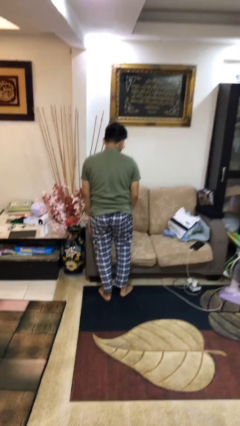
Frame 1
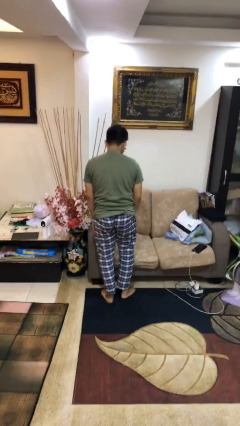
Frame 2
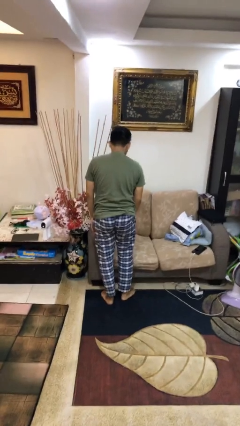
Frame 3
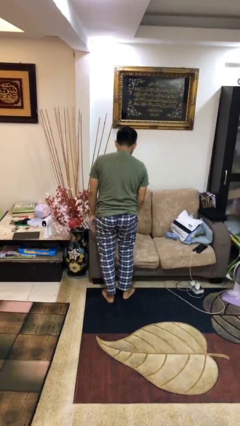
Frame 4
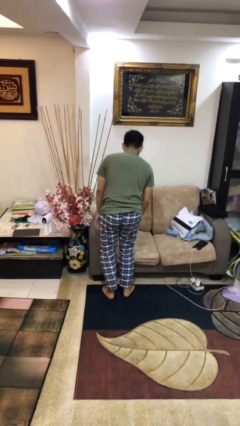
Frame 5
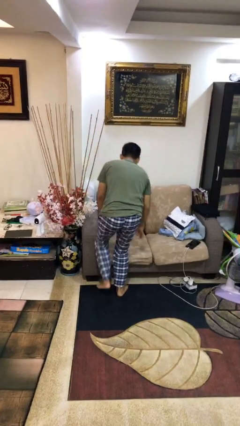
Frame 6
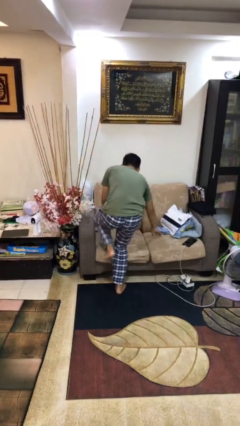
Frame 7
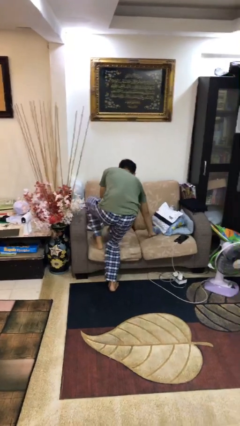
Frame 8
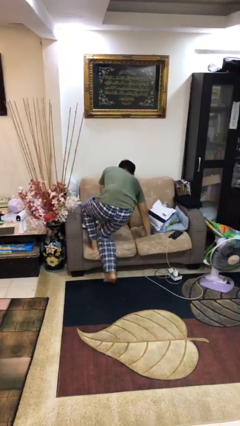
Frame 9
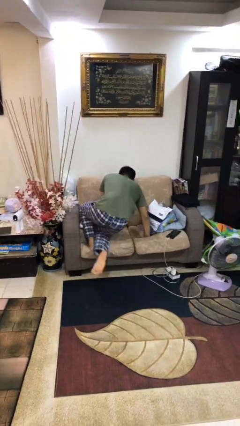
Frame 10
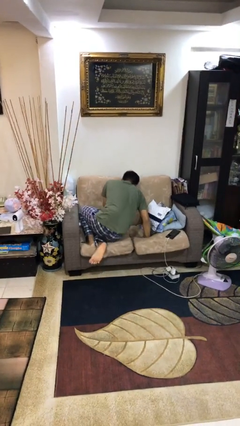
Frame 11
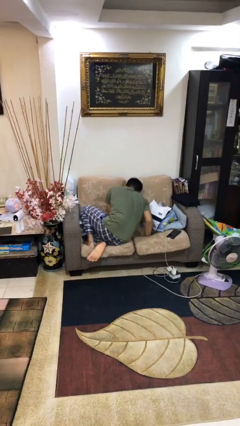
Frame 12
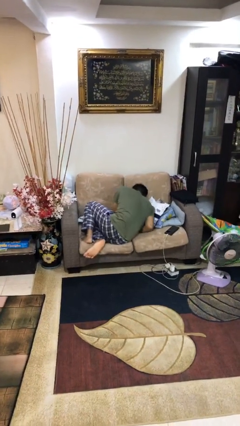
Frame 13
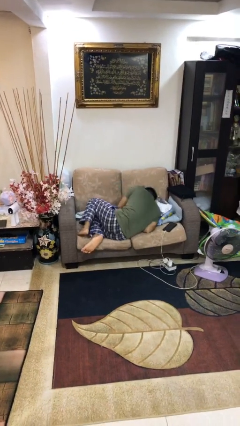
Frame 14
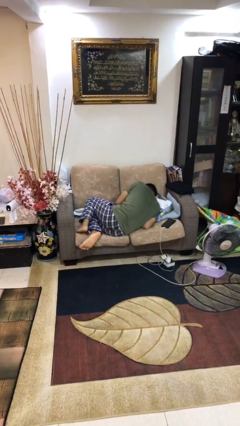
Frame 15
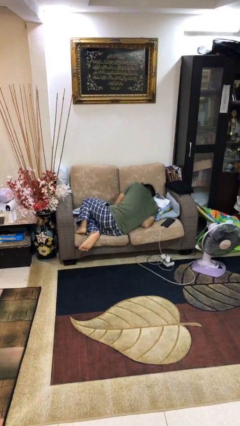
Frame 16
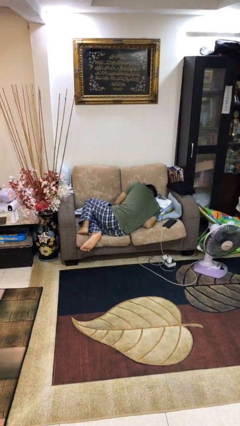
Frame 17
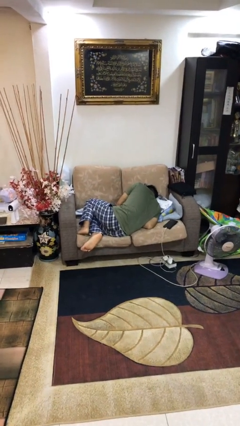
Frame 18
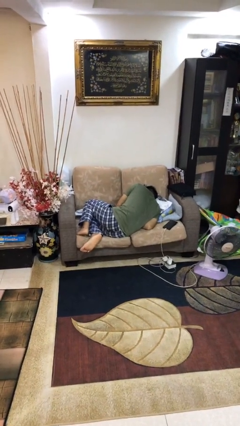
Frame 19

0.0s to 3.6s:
person lies down on couch

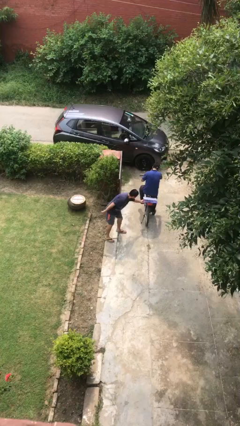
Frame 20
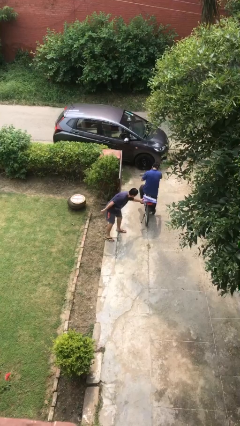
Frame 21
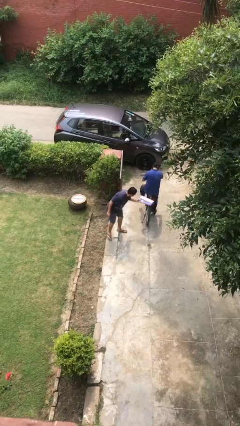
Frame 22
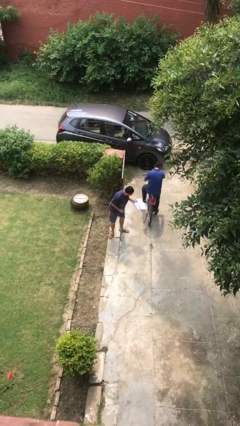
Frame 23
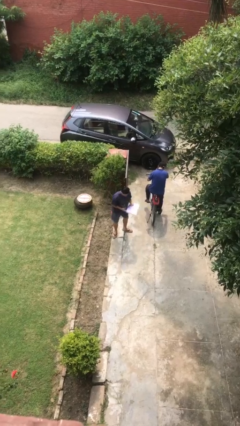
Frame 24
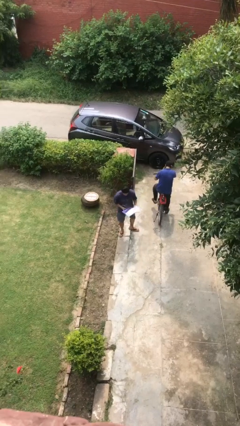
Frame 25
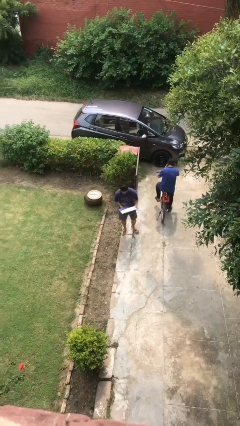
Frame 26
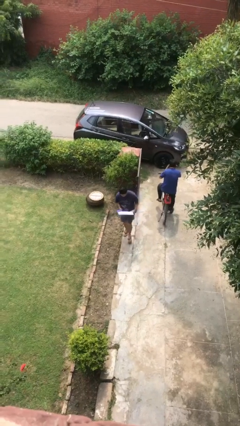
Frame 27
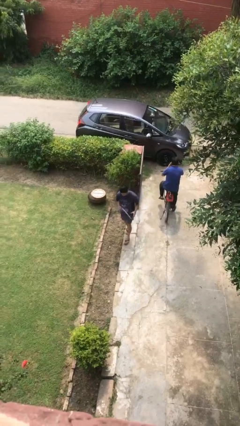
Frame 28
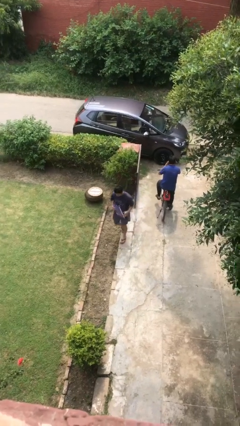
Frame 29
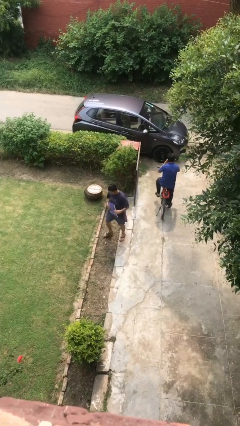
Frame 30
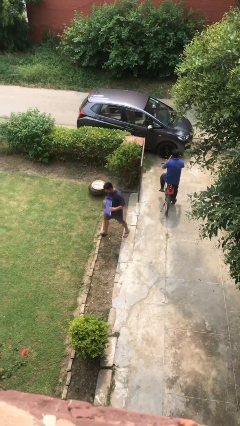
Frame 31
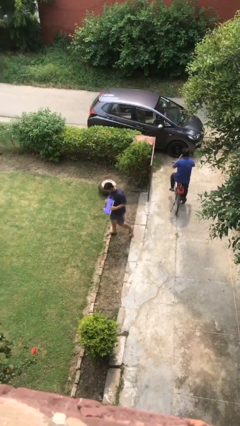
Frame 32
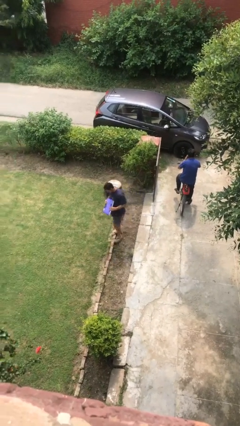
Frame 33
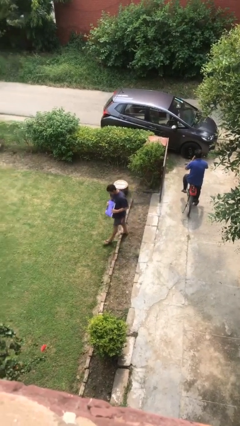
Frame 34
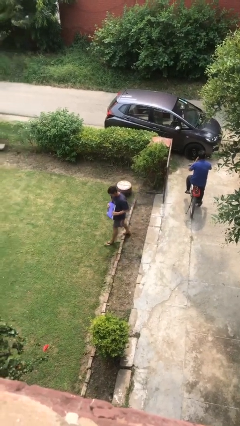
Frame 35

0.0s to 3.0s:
person steals object from person

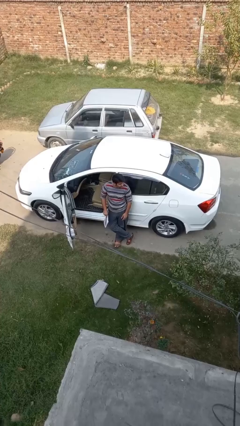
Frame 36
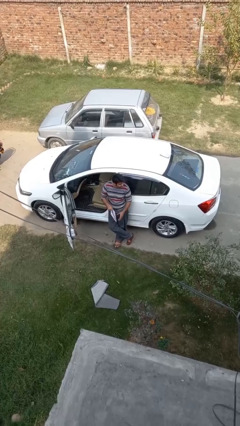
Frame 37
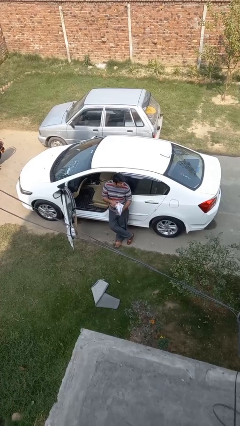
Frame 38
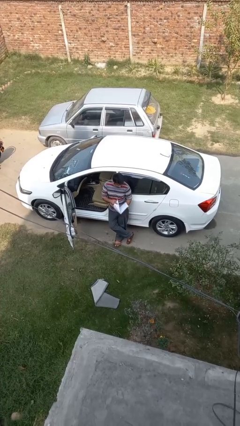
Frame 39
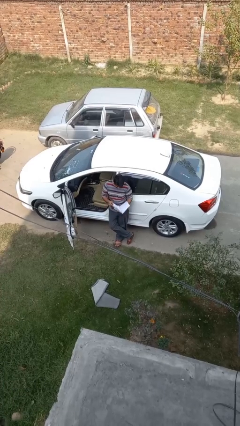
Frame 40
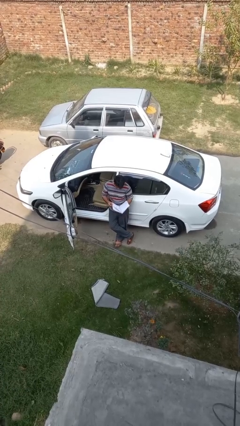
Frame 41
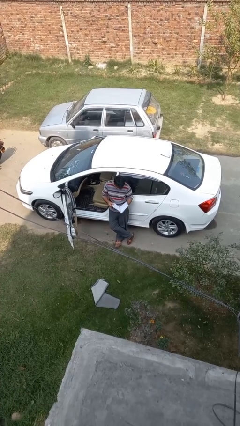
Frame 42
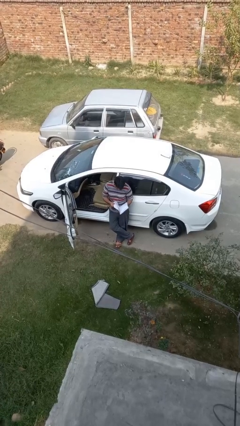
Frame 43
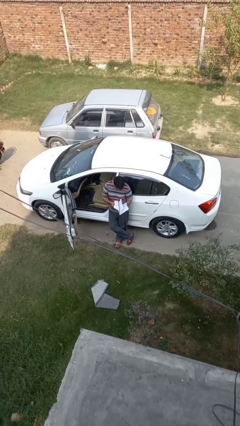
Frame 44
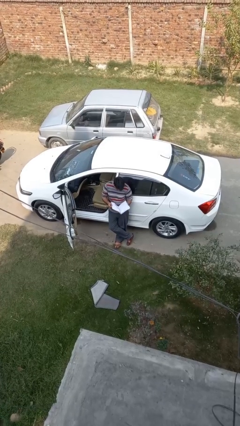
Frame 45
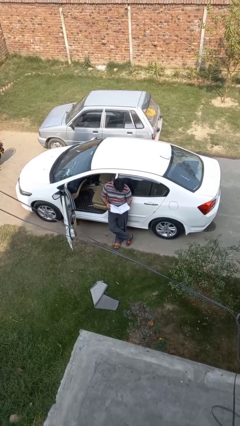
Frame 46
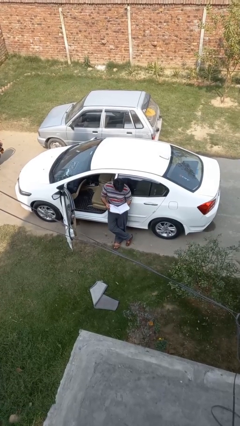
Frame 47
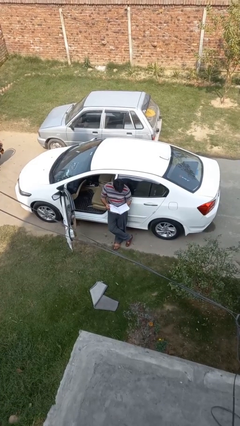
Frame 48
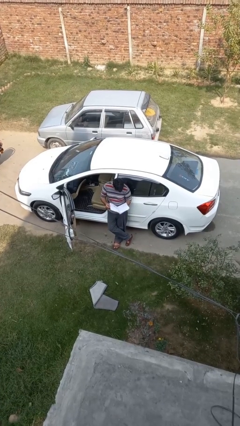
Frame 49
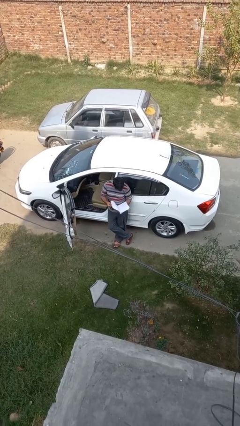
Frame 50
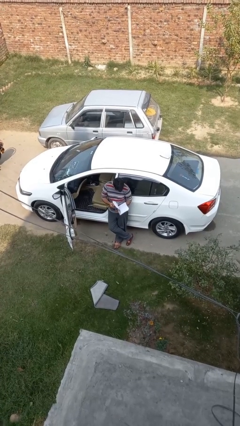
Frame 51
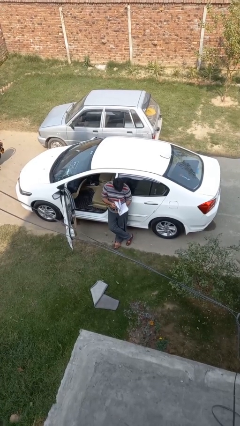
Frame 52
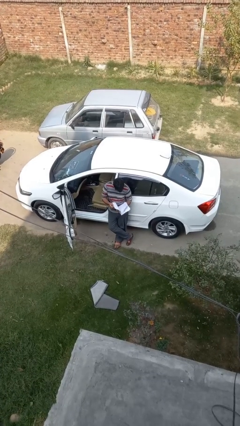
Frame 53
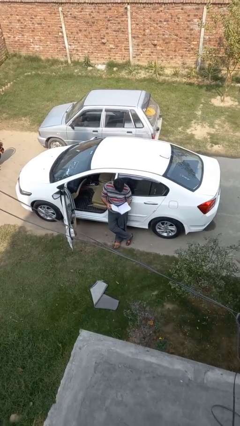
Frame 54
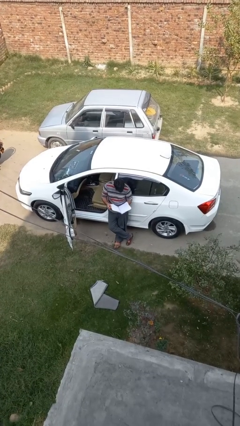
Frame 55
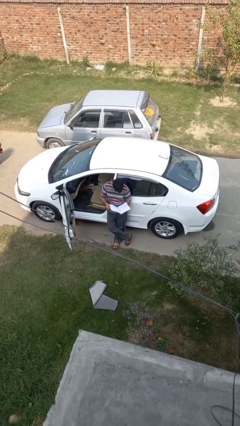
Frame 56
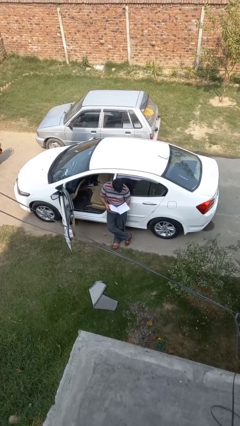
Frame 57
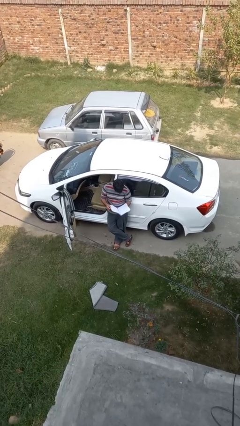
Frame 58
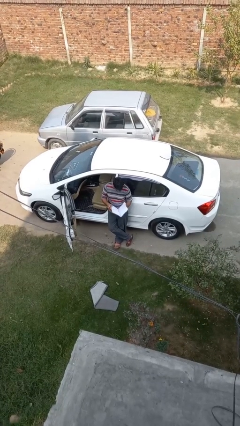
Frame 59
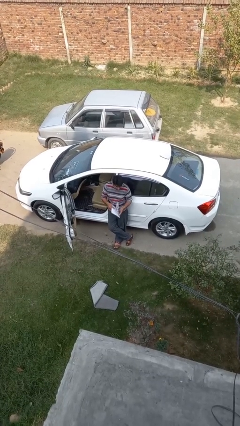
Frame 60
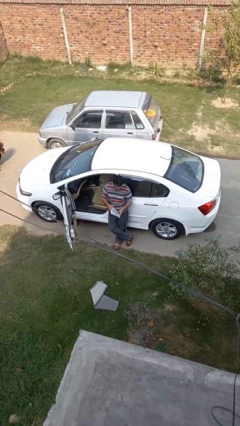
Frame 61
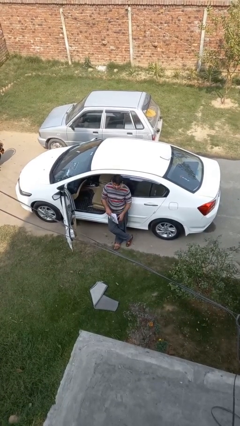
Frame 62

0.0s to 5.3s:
person reads document

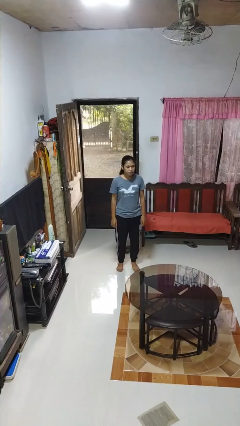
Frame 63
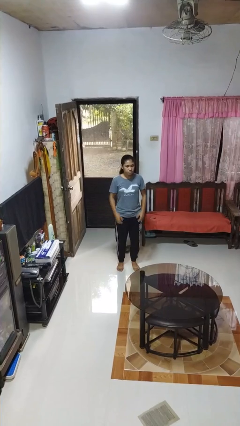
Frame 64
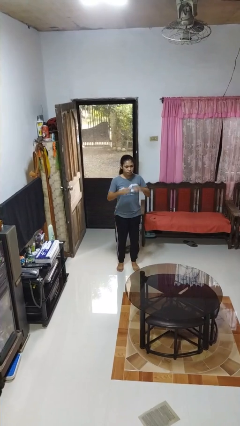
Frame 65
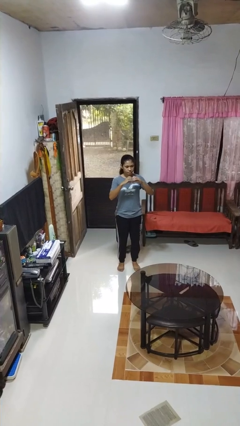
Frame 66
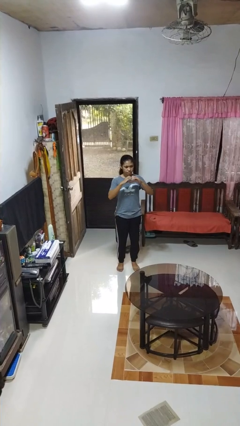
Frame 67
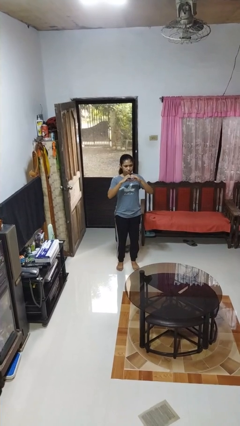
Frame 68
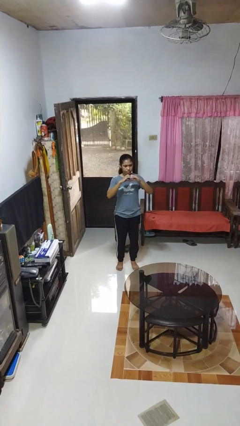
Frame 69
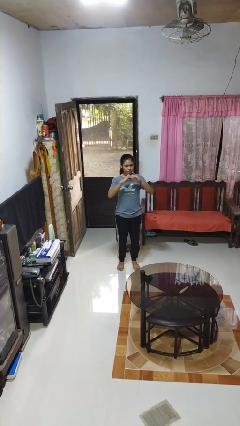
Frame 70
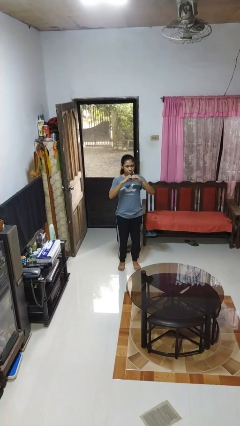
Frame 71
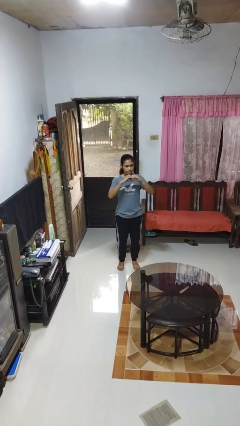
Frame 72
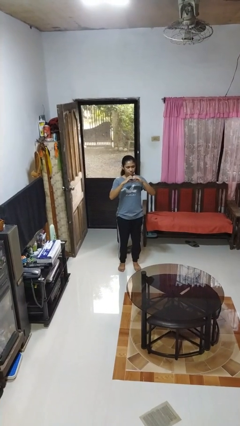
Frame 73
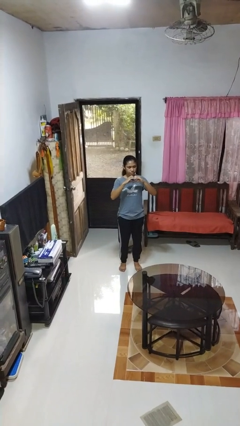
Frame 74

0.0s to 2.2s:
person gestures heart

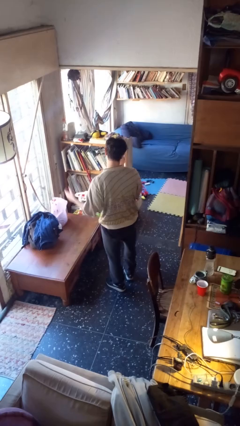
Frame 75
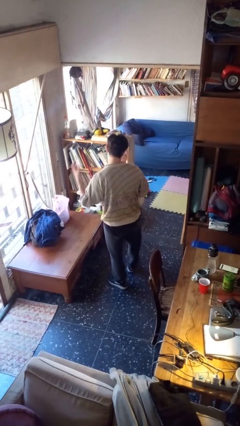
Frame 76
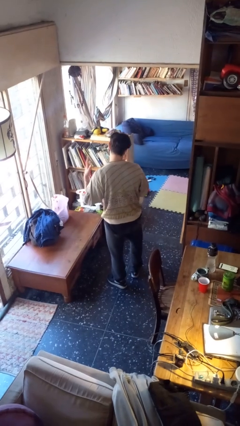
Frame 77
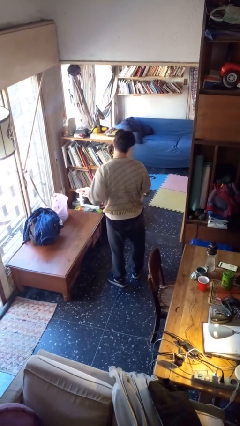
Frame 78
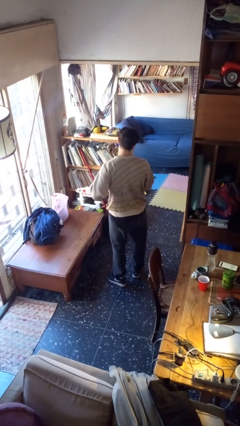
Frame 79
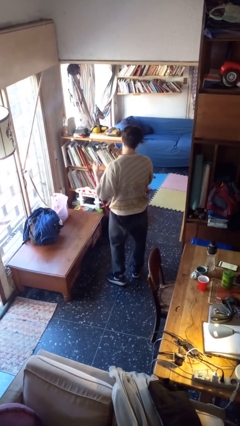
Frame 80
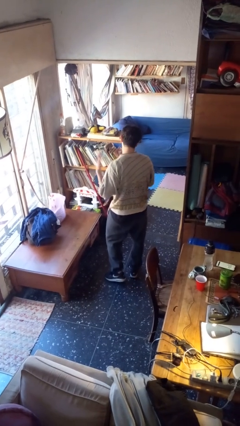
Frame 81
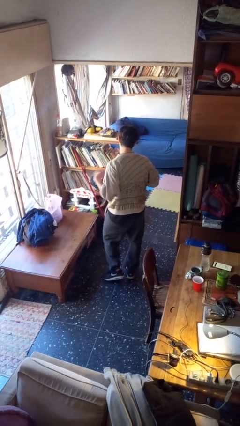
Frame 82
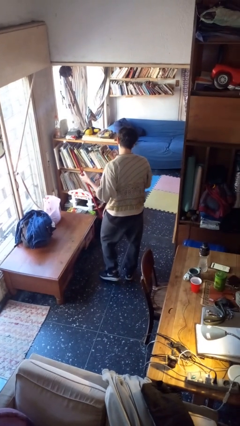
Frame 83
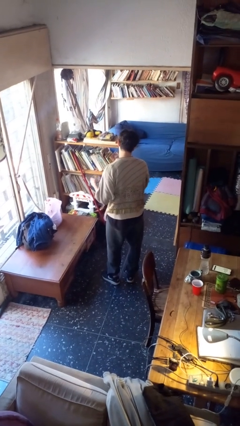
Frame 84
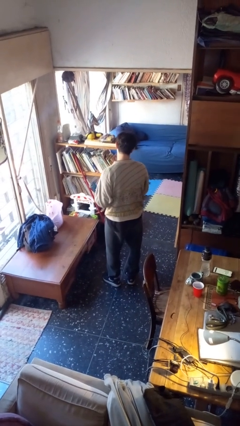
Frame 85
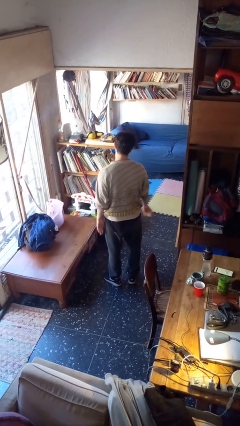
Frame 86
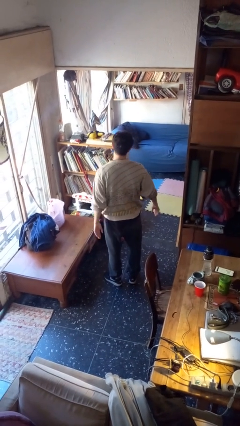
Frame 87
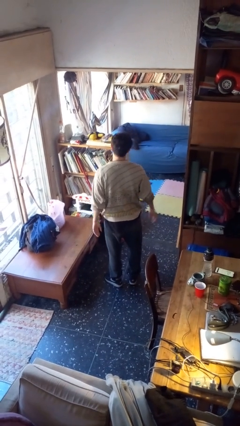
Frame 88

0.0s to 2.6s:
person drums on chest

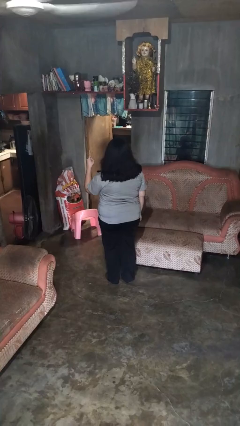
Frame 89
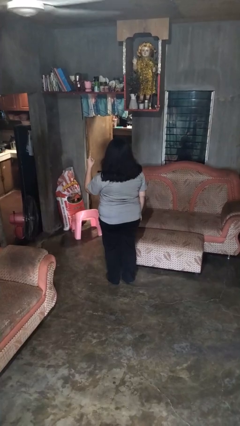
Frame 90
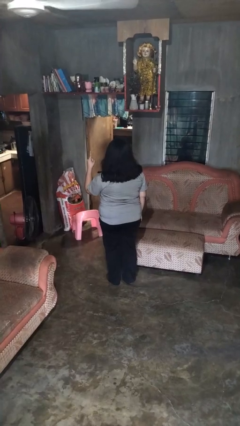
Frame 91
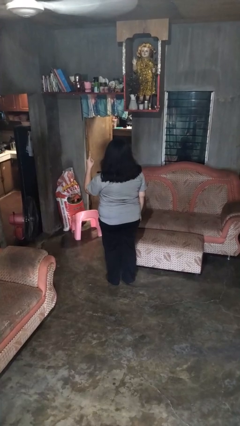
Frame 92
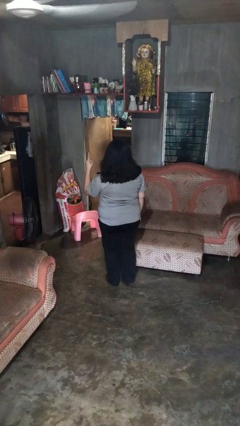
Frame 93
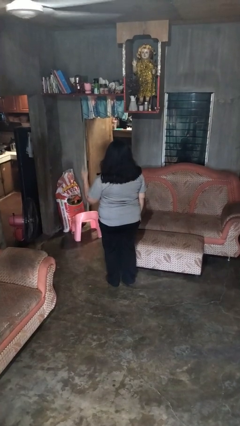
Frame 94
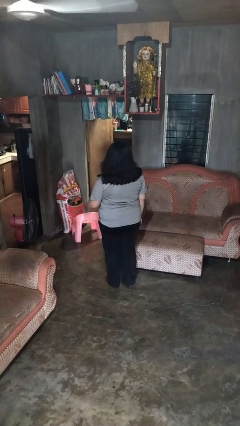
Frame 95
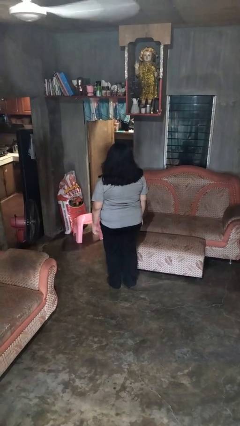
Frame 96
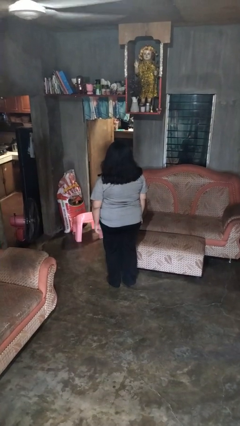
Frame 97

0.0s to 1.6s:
person gestures number one
